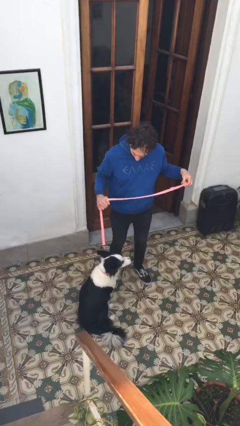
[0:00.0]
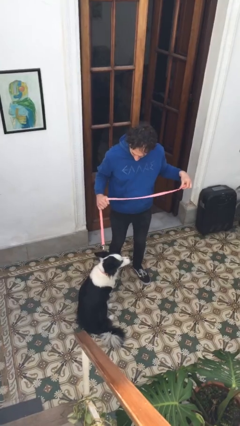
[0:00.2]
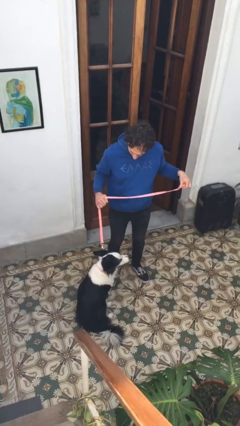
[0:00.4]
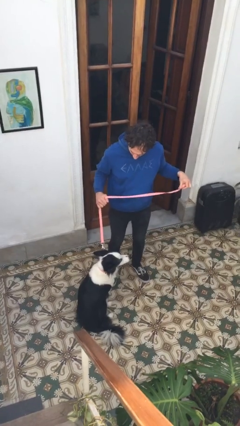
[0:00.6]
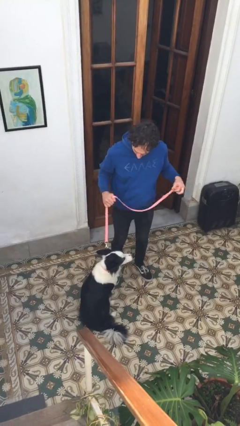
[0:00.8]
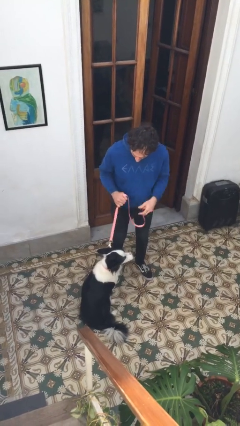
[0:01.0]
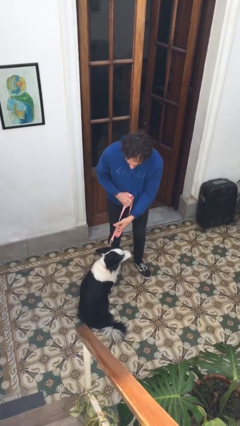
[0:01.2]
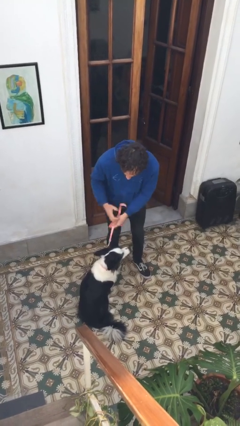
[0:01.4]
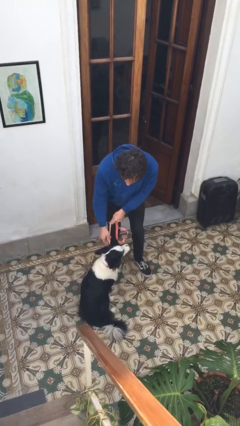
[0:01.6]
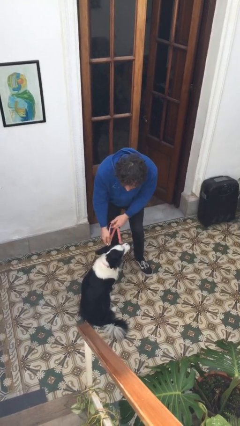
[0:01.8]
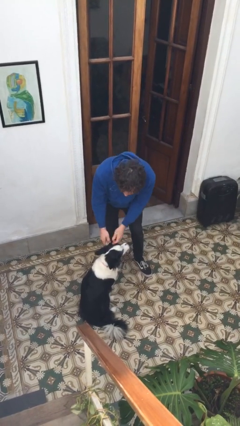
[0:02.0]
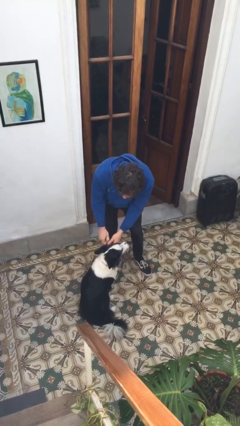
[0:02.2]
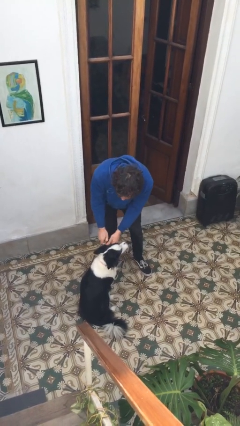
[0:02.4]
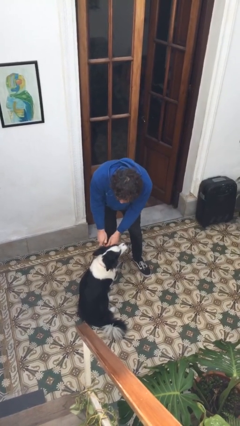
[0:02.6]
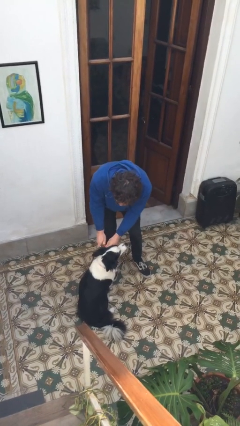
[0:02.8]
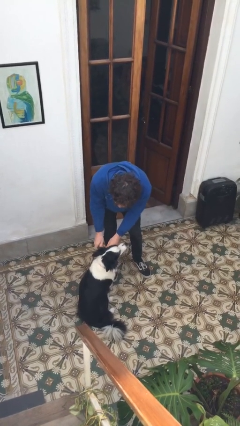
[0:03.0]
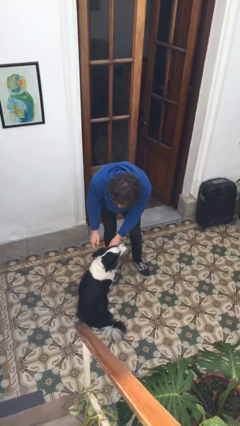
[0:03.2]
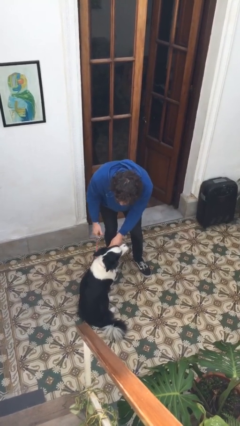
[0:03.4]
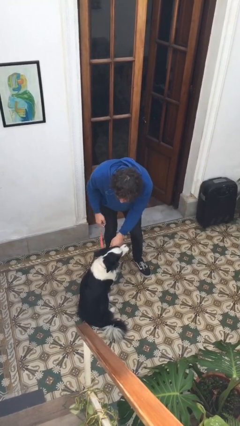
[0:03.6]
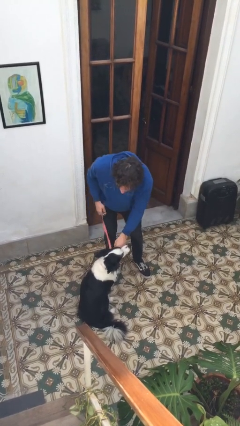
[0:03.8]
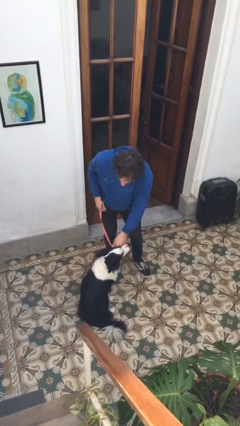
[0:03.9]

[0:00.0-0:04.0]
person unattaches leash from dog

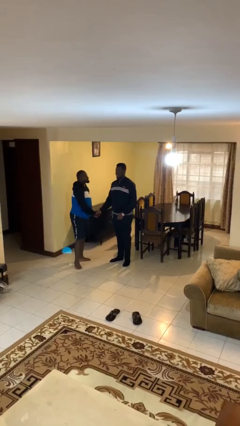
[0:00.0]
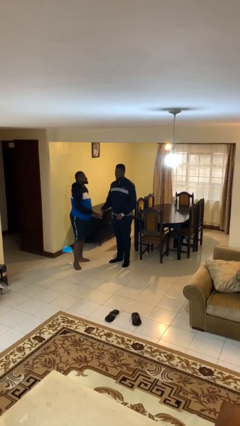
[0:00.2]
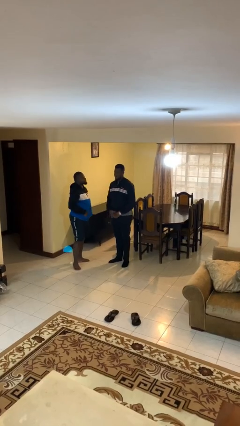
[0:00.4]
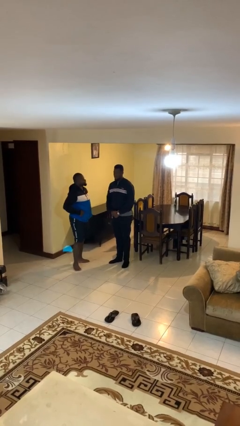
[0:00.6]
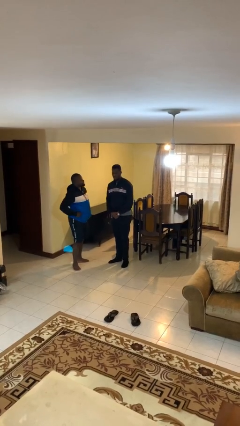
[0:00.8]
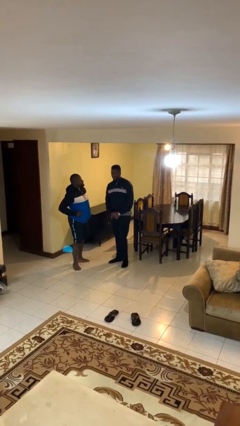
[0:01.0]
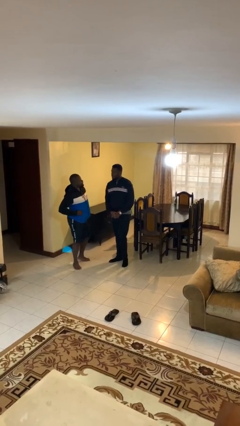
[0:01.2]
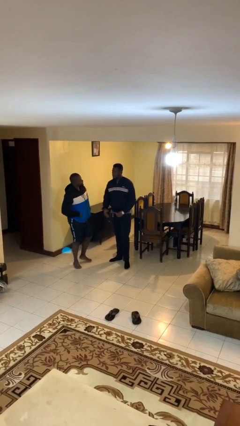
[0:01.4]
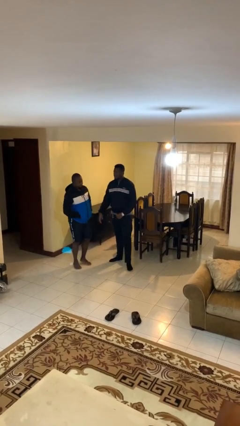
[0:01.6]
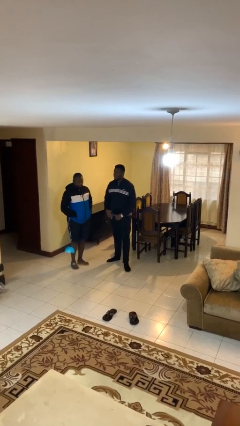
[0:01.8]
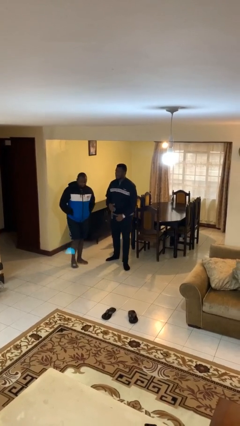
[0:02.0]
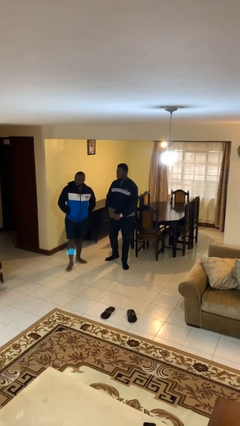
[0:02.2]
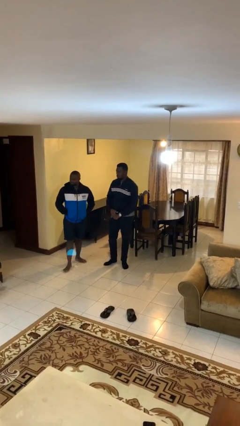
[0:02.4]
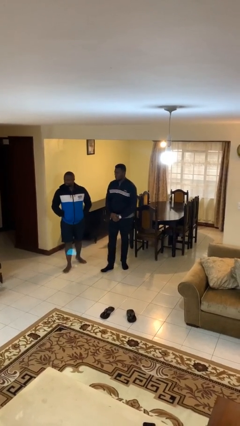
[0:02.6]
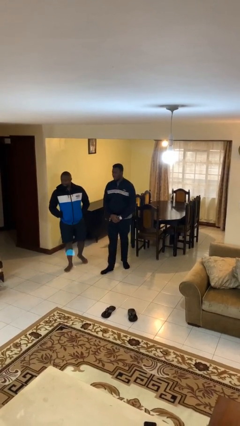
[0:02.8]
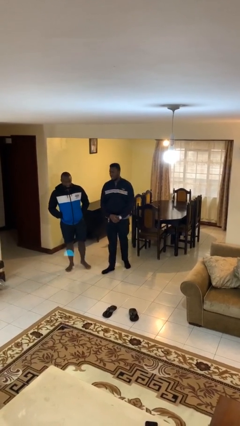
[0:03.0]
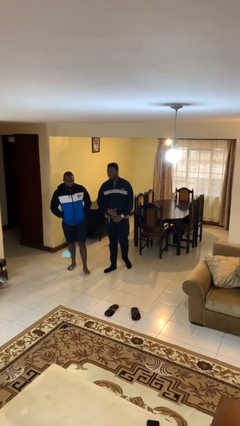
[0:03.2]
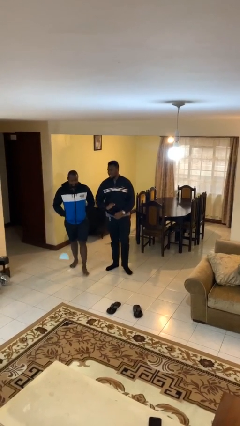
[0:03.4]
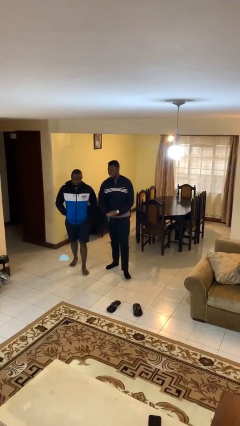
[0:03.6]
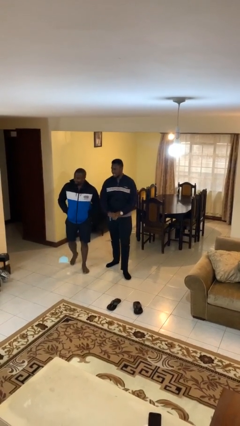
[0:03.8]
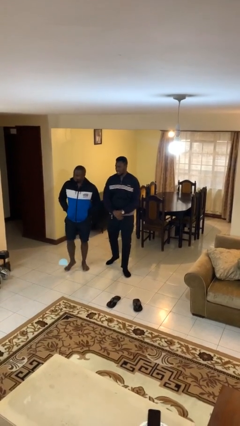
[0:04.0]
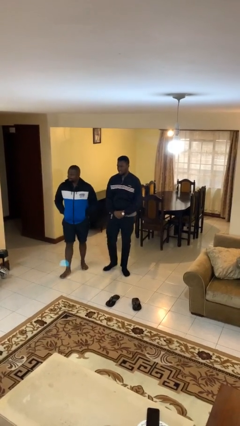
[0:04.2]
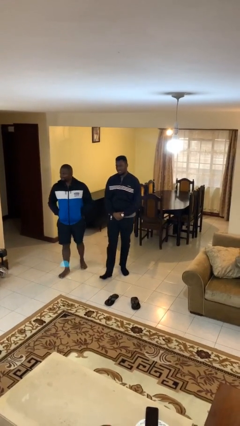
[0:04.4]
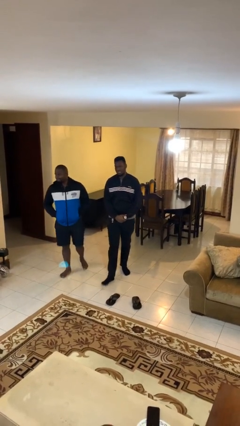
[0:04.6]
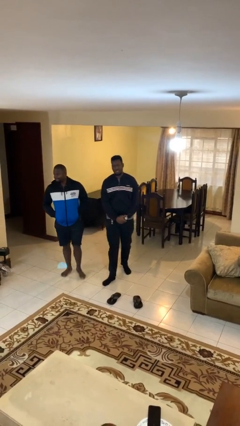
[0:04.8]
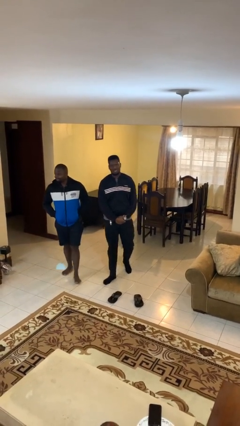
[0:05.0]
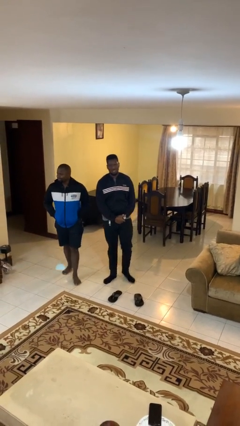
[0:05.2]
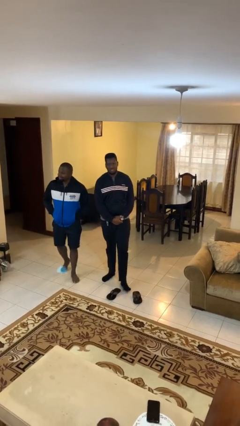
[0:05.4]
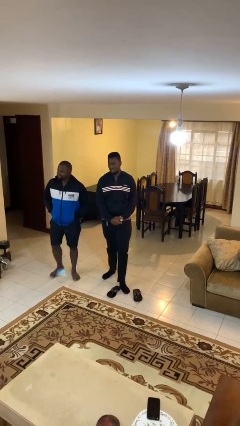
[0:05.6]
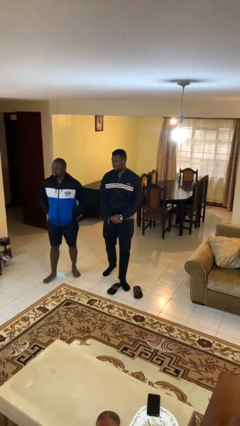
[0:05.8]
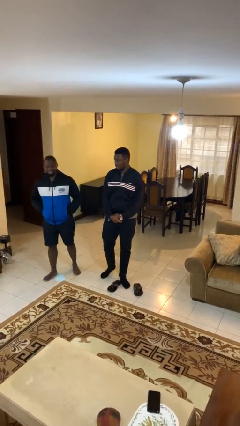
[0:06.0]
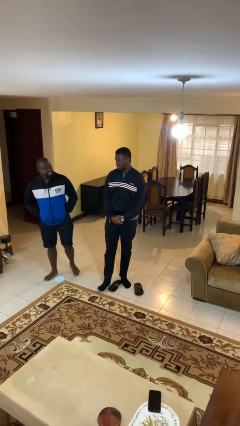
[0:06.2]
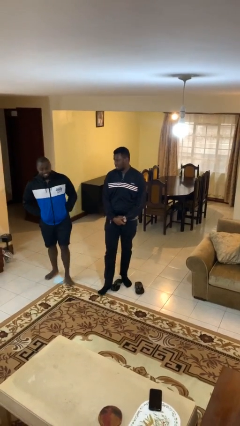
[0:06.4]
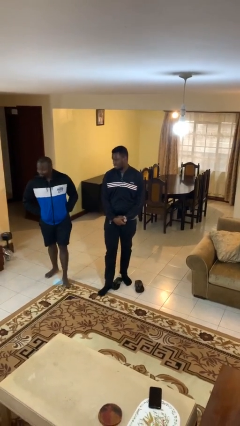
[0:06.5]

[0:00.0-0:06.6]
person talks to person

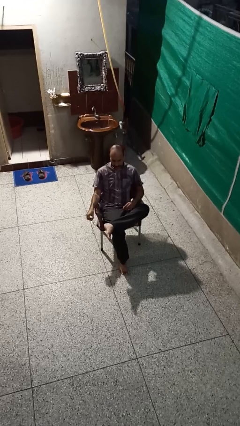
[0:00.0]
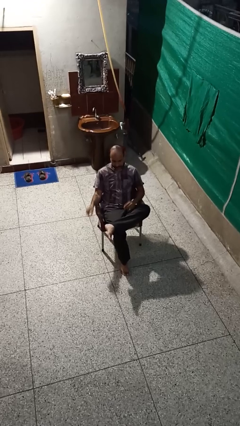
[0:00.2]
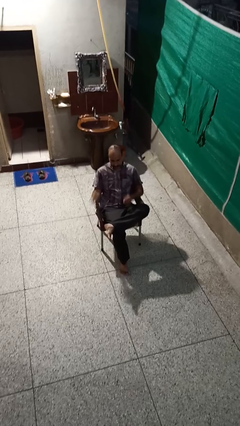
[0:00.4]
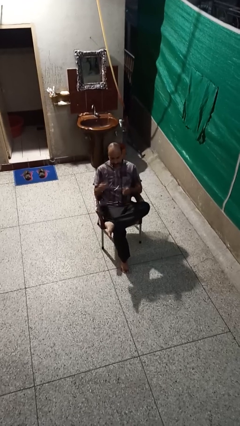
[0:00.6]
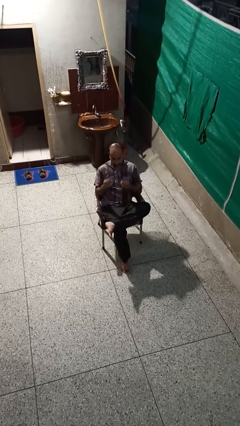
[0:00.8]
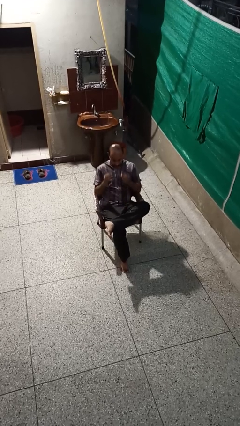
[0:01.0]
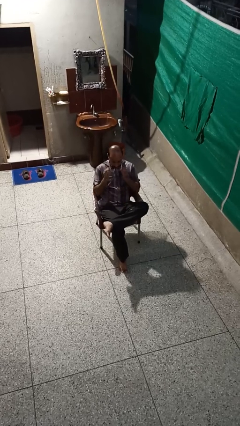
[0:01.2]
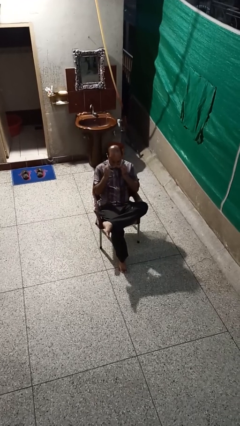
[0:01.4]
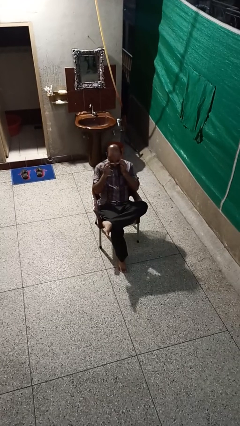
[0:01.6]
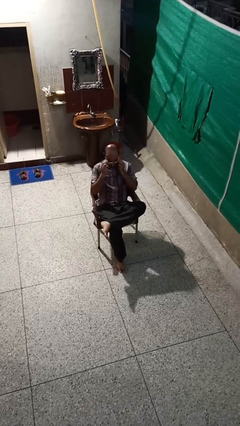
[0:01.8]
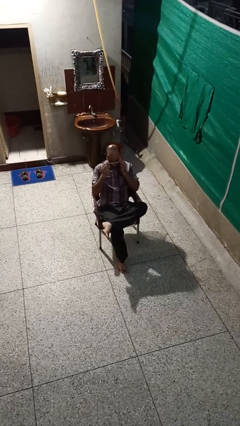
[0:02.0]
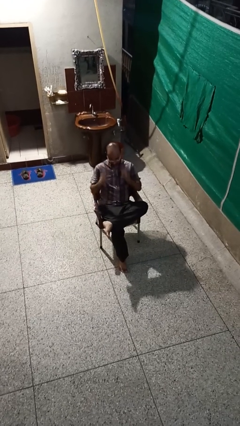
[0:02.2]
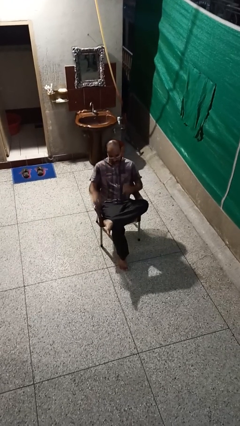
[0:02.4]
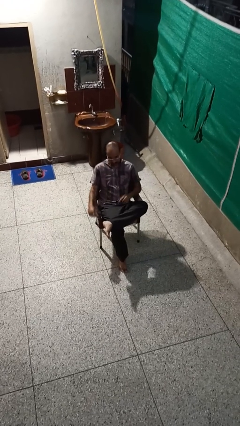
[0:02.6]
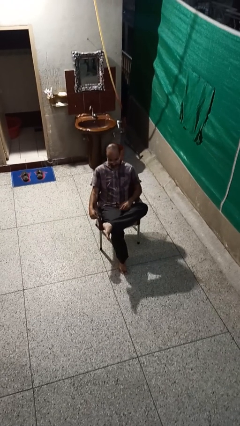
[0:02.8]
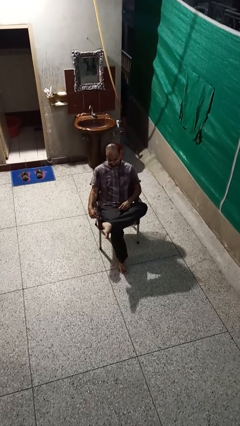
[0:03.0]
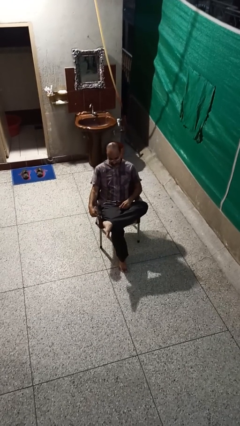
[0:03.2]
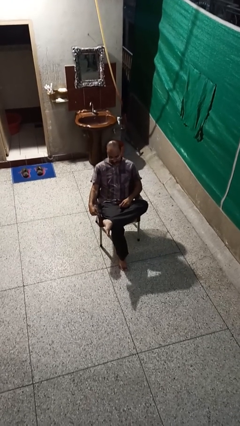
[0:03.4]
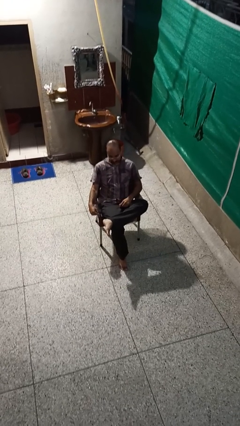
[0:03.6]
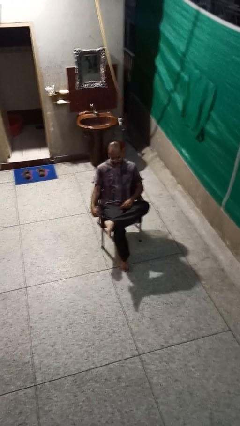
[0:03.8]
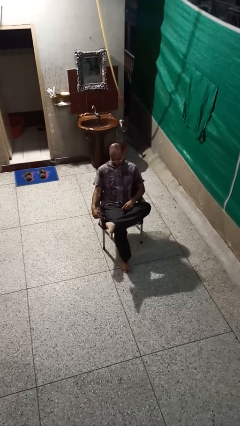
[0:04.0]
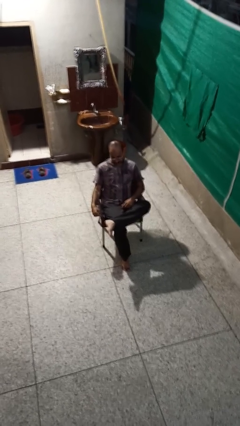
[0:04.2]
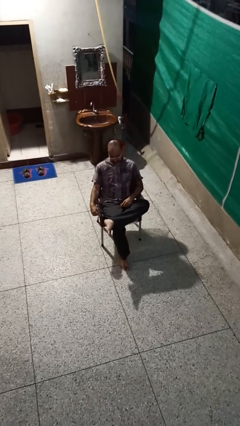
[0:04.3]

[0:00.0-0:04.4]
person puts on glasses

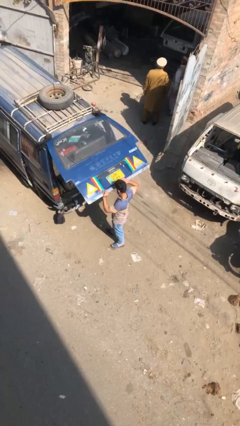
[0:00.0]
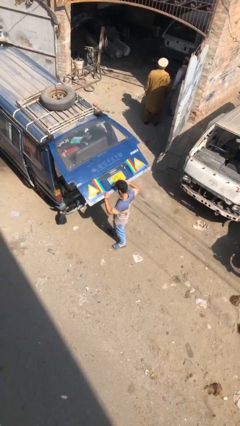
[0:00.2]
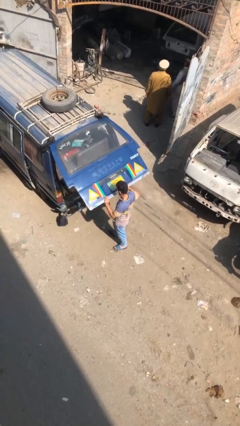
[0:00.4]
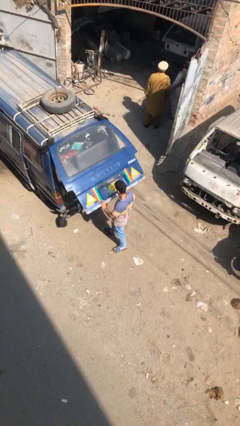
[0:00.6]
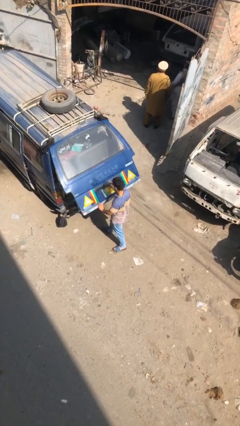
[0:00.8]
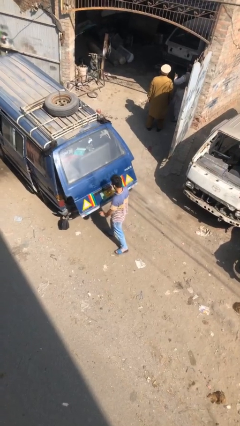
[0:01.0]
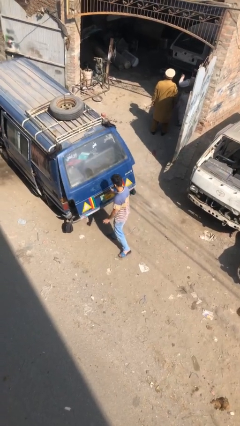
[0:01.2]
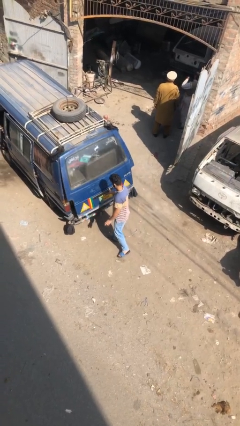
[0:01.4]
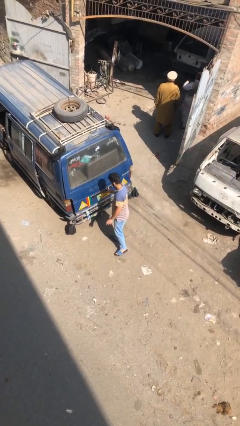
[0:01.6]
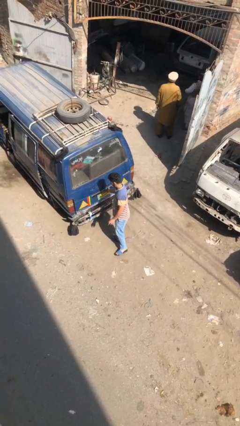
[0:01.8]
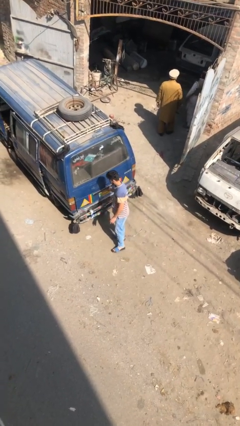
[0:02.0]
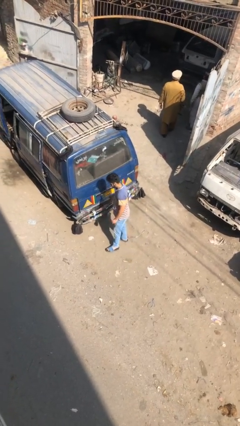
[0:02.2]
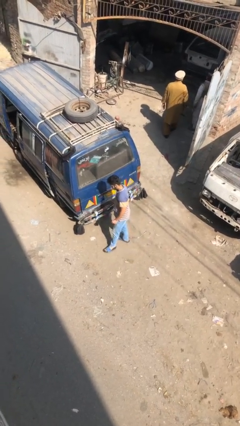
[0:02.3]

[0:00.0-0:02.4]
person closes car trunk
